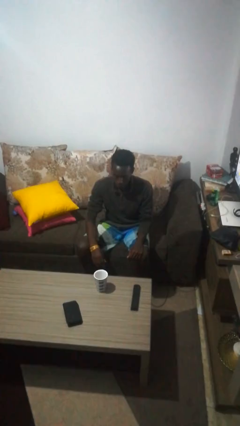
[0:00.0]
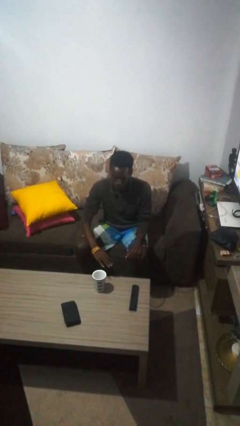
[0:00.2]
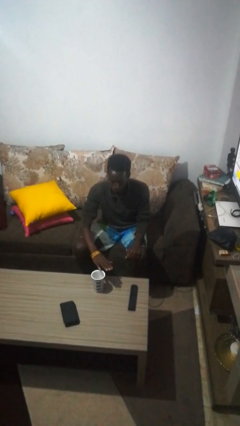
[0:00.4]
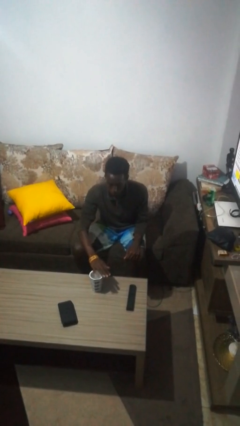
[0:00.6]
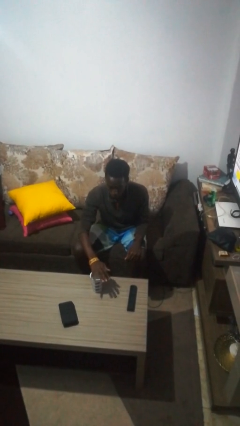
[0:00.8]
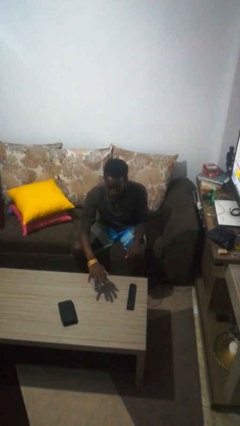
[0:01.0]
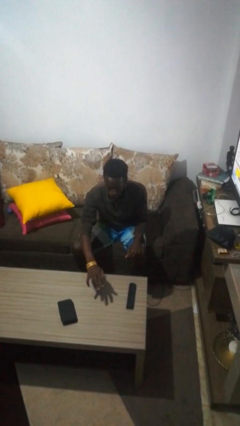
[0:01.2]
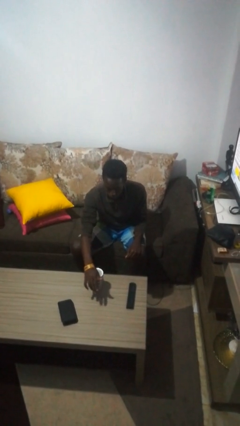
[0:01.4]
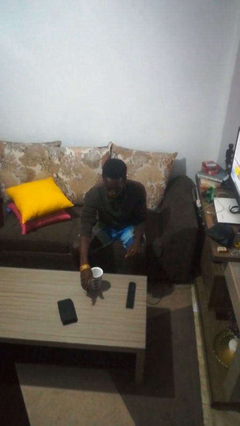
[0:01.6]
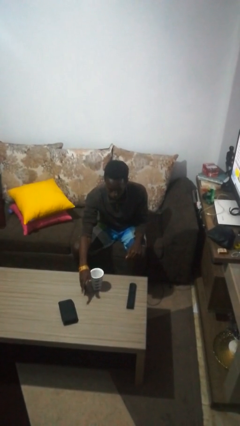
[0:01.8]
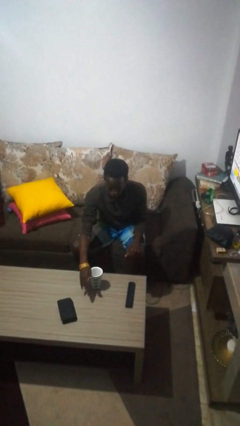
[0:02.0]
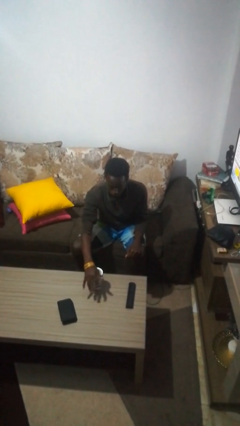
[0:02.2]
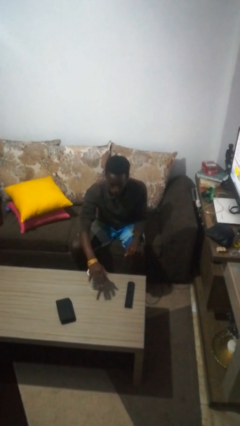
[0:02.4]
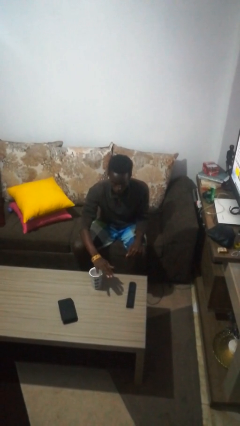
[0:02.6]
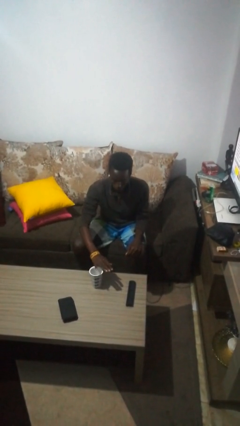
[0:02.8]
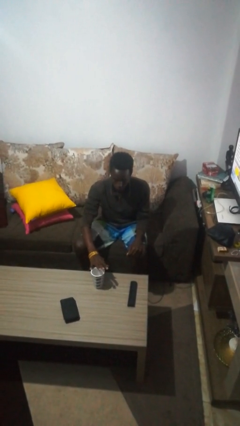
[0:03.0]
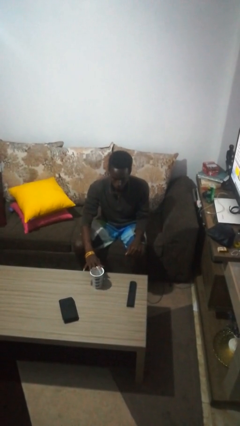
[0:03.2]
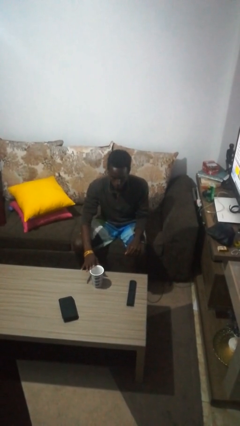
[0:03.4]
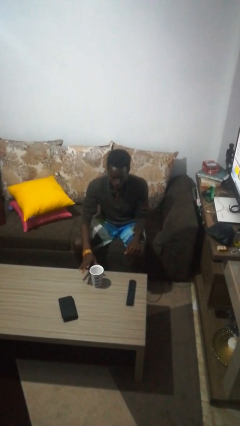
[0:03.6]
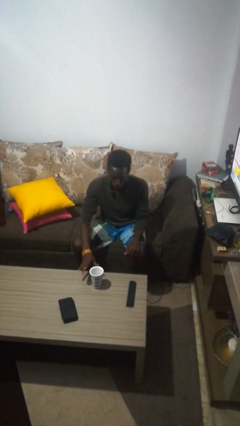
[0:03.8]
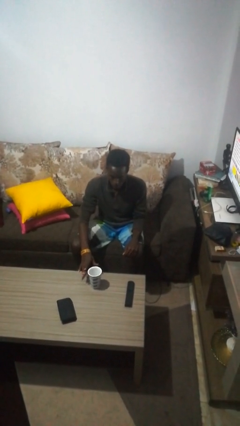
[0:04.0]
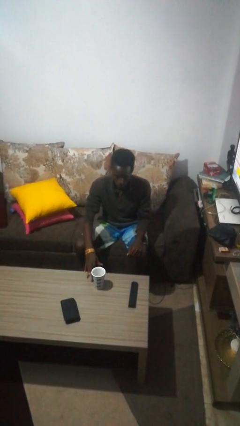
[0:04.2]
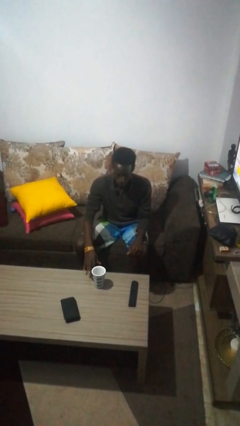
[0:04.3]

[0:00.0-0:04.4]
person waves hand over object

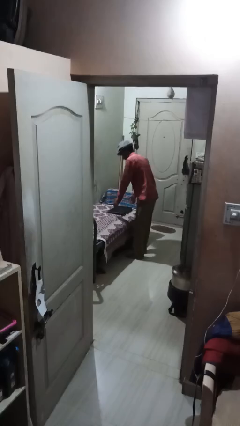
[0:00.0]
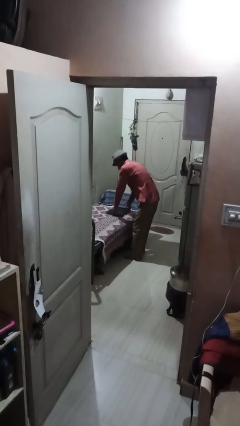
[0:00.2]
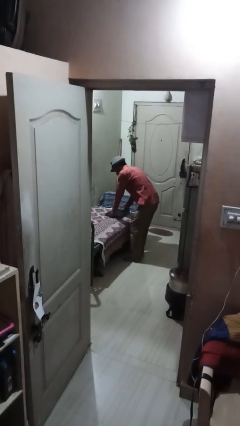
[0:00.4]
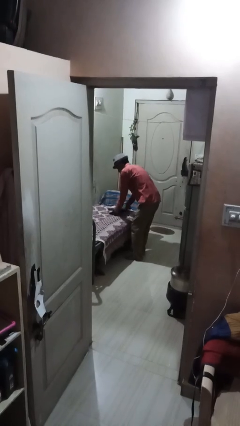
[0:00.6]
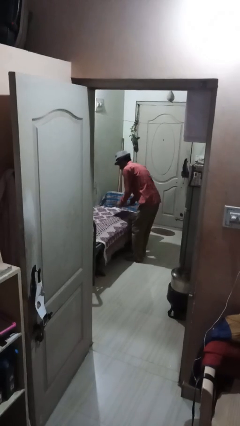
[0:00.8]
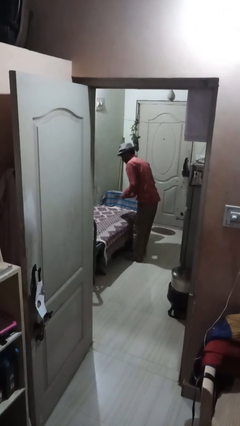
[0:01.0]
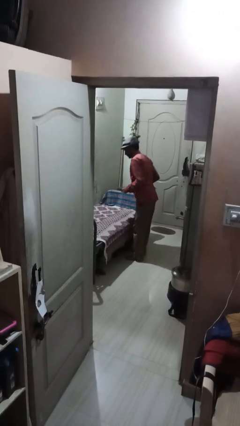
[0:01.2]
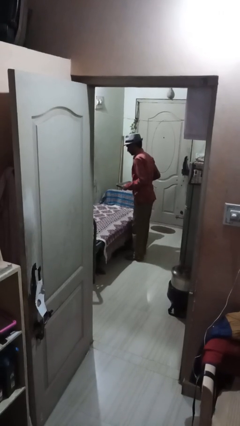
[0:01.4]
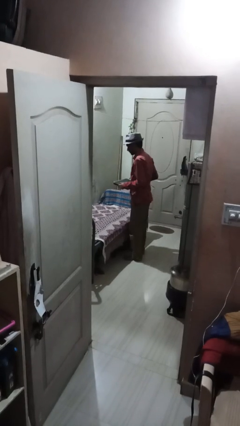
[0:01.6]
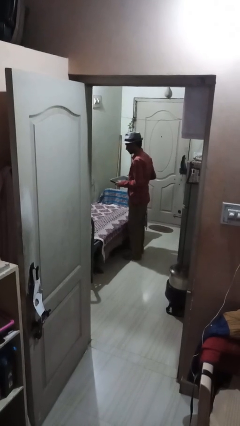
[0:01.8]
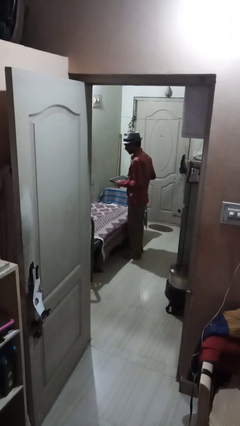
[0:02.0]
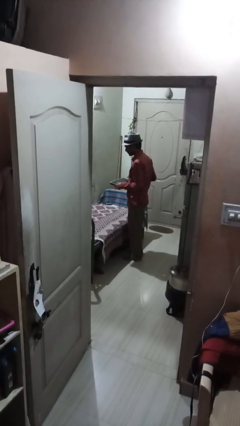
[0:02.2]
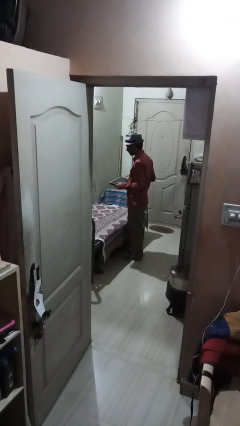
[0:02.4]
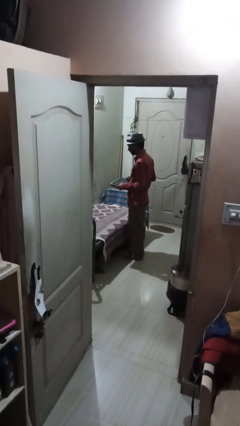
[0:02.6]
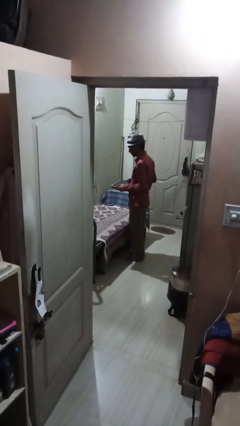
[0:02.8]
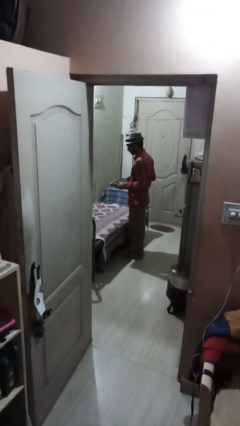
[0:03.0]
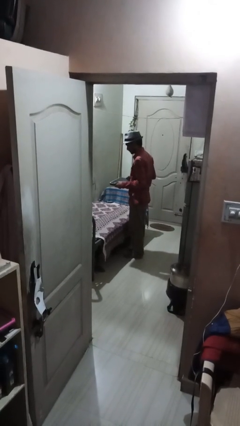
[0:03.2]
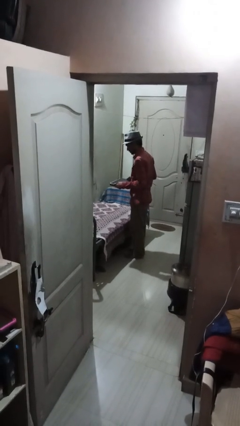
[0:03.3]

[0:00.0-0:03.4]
person picks up object from couch

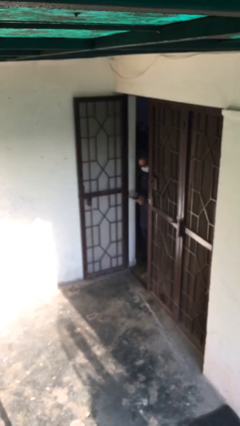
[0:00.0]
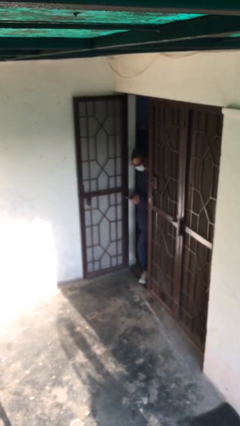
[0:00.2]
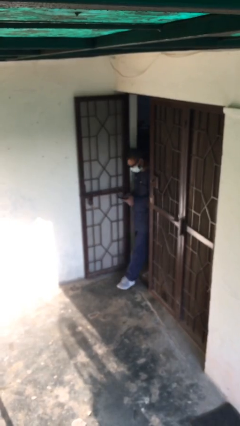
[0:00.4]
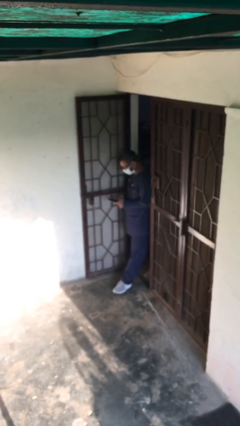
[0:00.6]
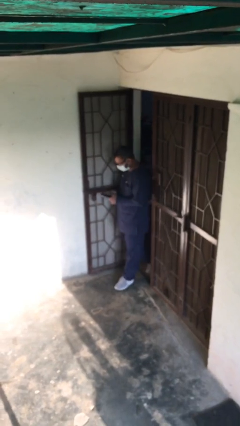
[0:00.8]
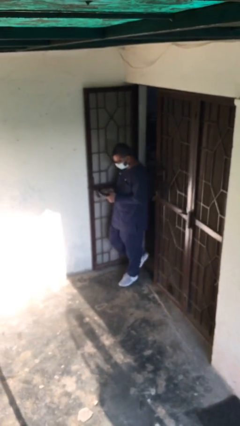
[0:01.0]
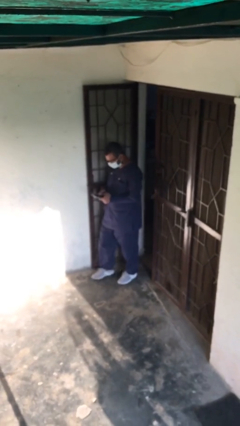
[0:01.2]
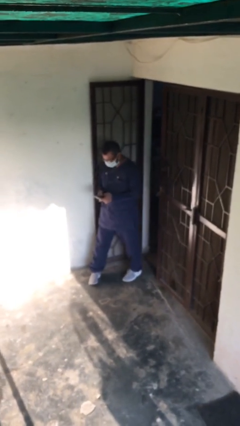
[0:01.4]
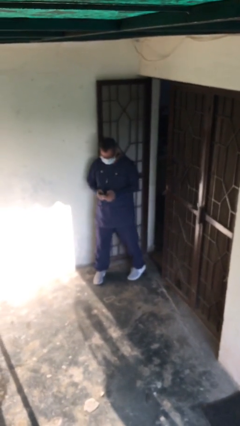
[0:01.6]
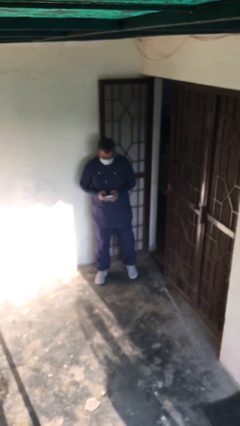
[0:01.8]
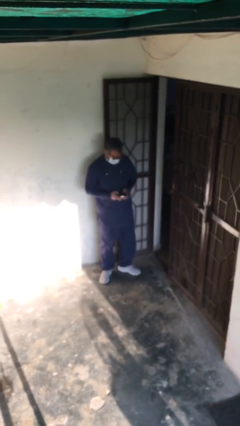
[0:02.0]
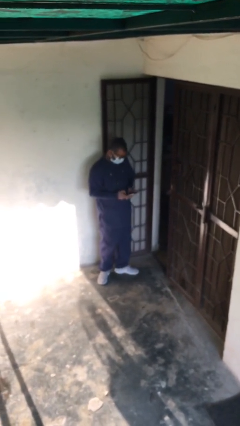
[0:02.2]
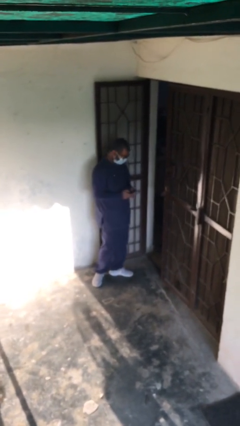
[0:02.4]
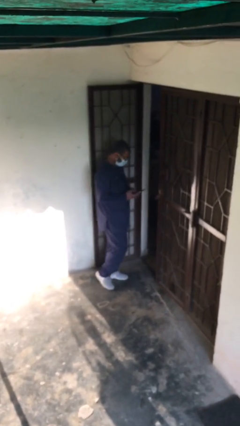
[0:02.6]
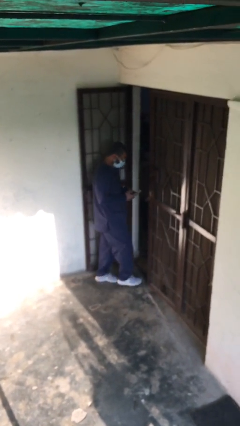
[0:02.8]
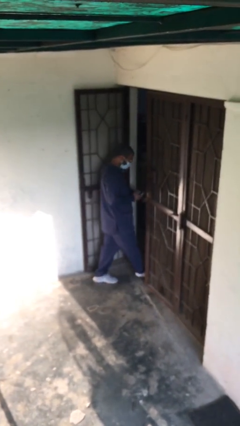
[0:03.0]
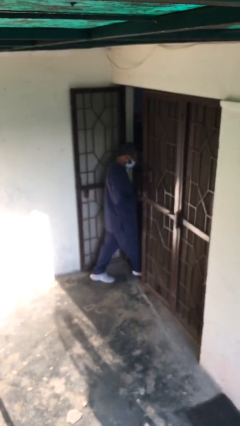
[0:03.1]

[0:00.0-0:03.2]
person enters scene through structure

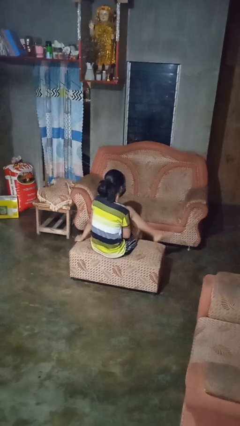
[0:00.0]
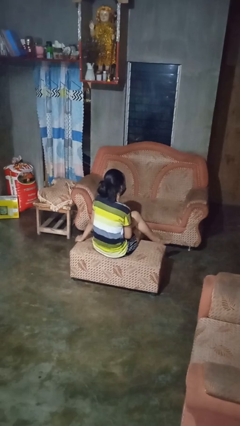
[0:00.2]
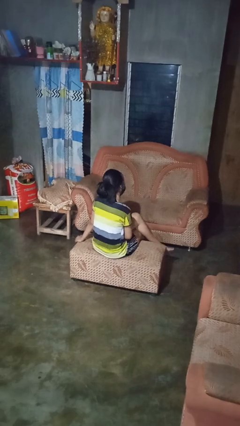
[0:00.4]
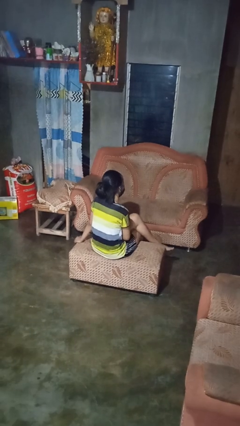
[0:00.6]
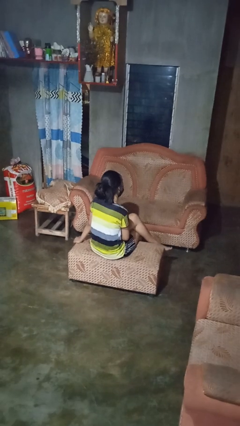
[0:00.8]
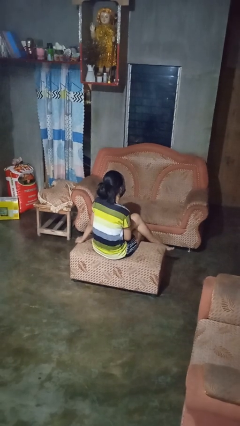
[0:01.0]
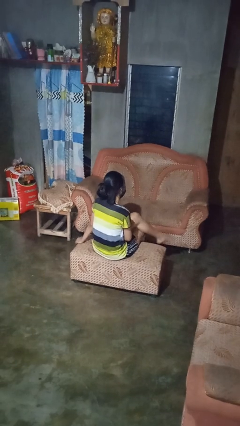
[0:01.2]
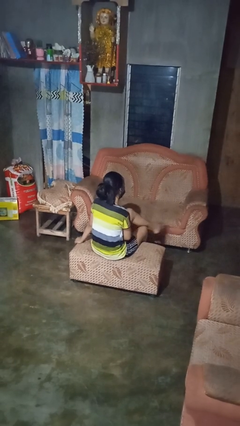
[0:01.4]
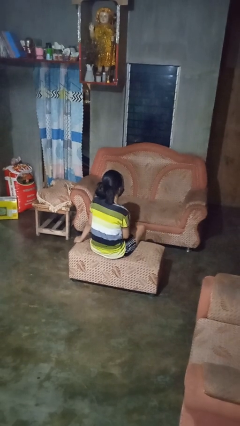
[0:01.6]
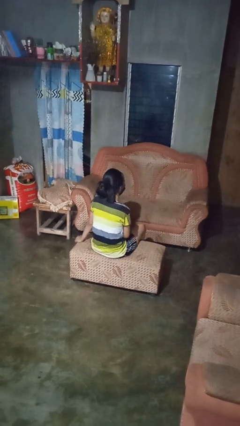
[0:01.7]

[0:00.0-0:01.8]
person crosses legs

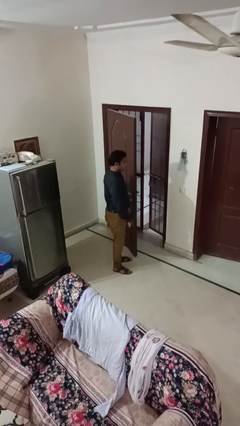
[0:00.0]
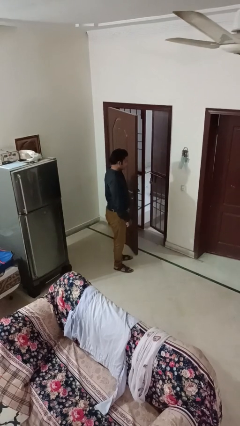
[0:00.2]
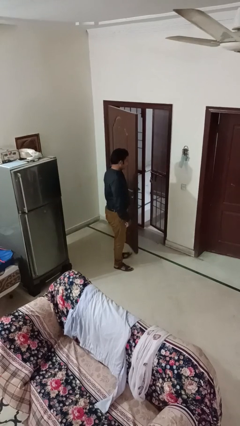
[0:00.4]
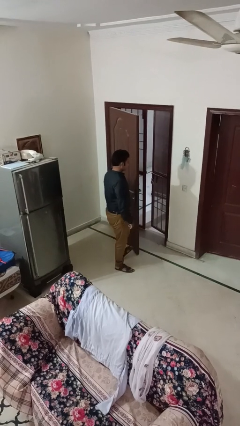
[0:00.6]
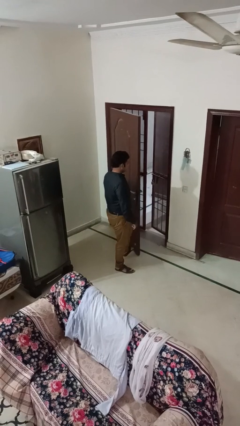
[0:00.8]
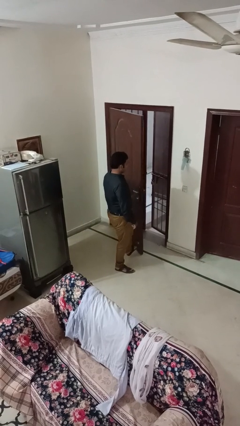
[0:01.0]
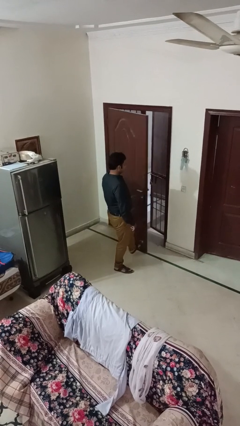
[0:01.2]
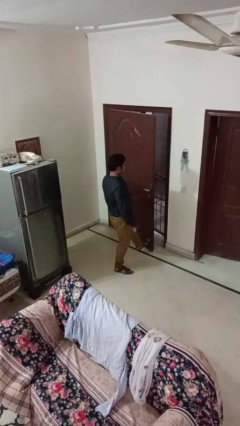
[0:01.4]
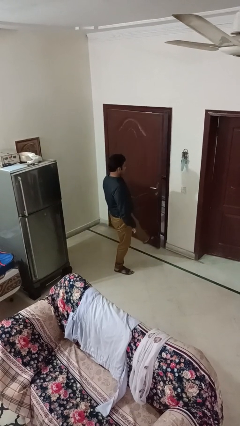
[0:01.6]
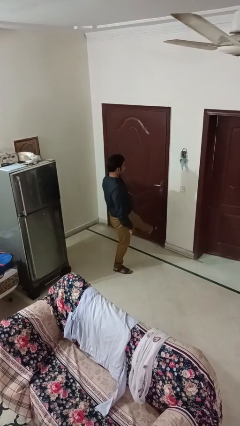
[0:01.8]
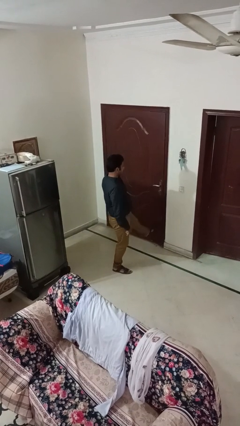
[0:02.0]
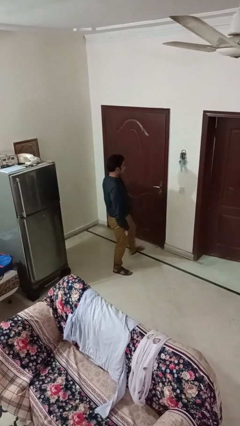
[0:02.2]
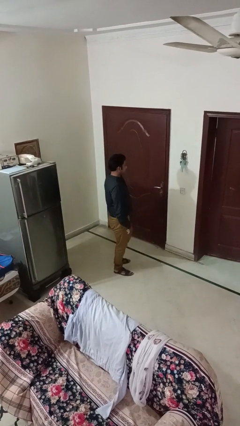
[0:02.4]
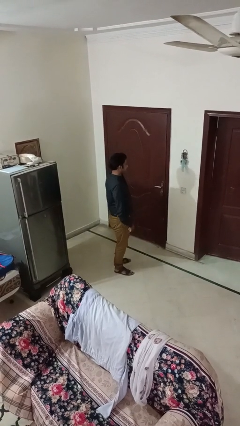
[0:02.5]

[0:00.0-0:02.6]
person closes door with foot

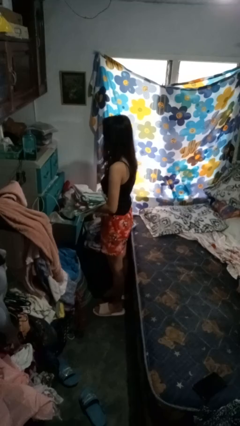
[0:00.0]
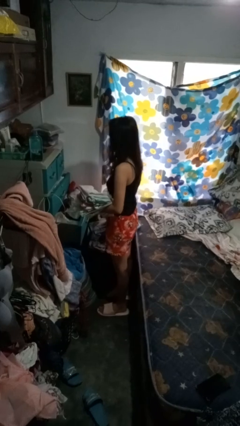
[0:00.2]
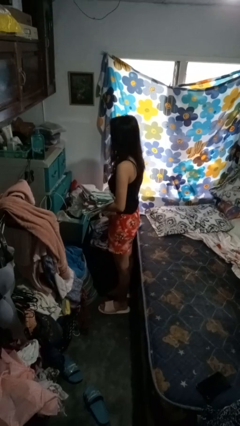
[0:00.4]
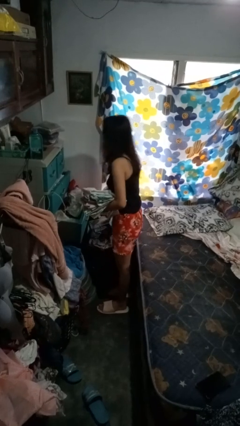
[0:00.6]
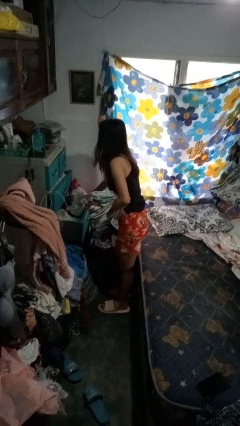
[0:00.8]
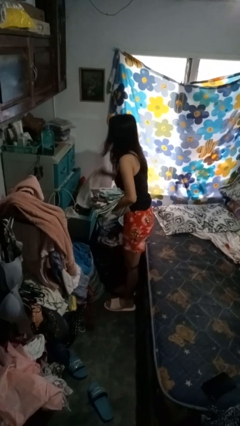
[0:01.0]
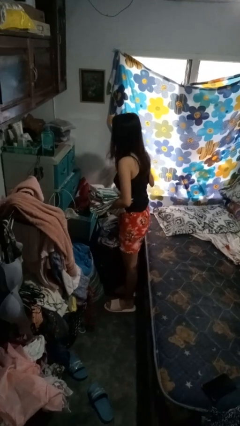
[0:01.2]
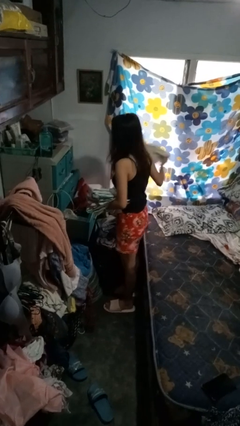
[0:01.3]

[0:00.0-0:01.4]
person takes clothes from dresser

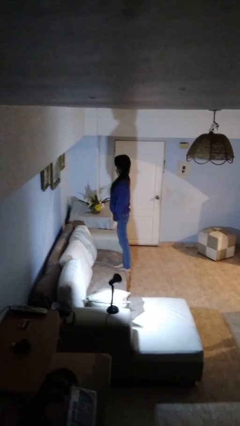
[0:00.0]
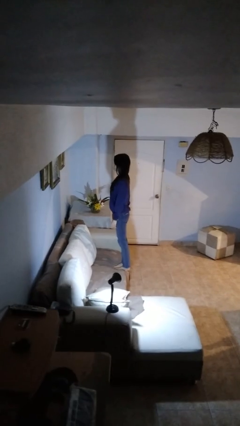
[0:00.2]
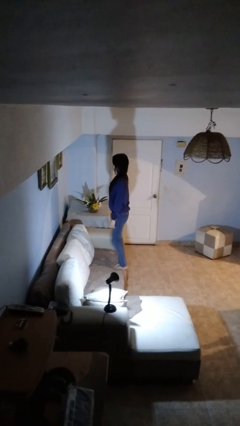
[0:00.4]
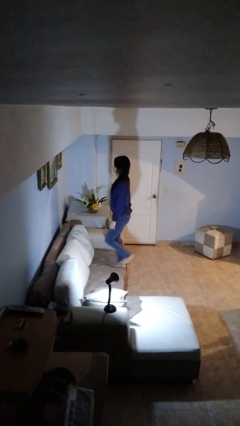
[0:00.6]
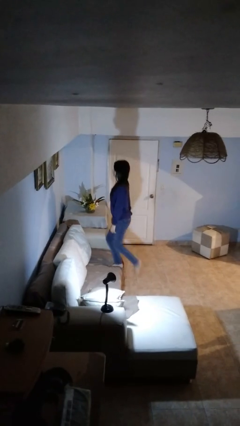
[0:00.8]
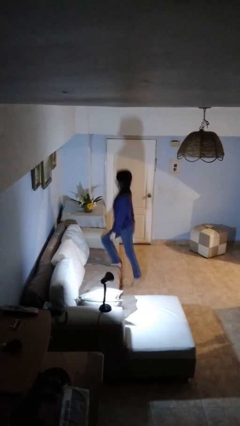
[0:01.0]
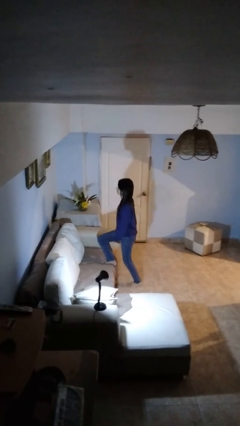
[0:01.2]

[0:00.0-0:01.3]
person climbs off couch
